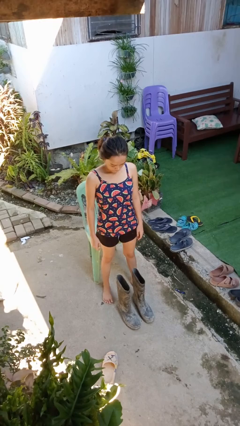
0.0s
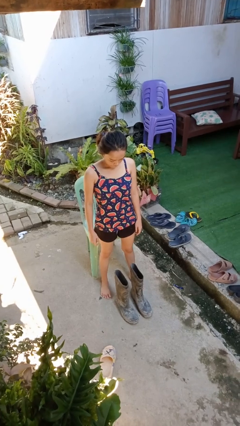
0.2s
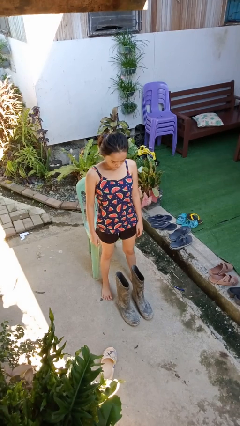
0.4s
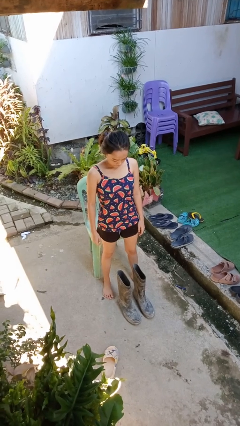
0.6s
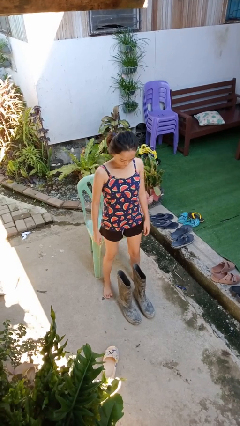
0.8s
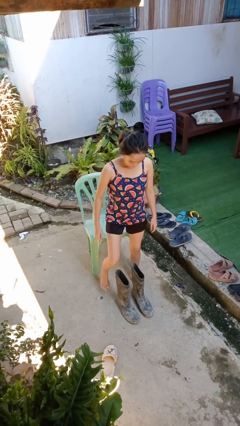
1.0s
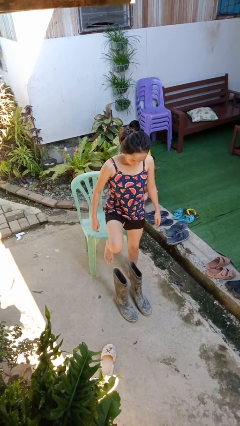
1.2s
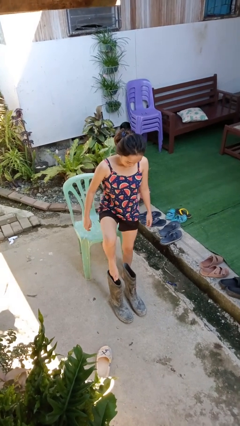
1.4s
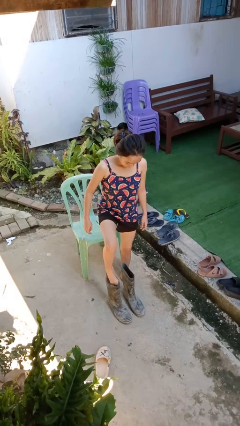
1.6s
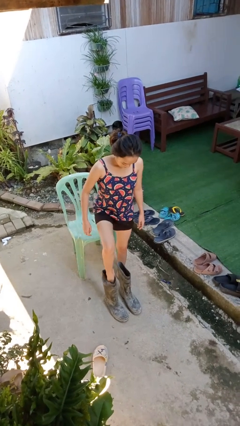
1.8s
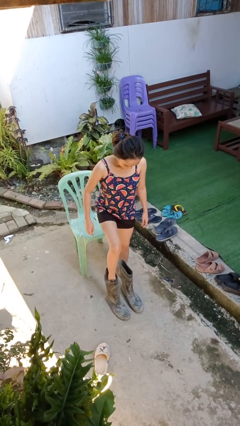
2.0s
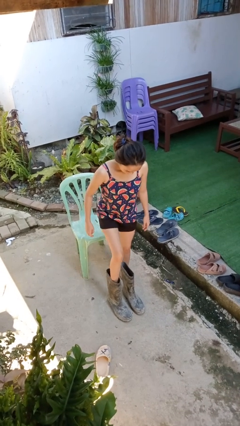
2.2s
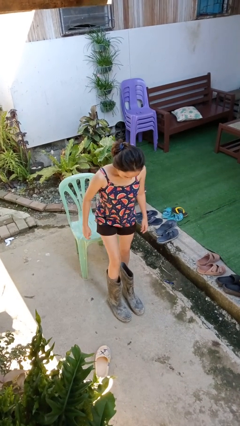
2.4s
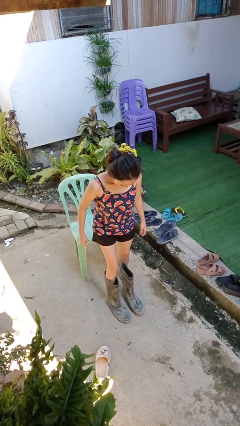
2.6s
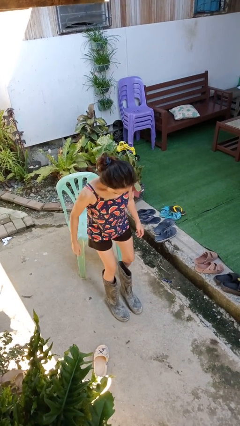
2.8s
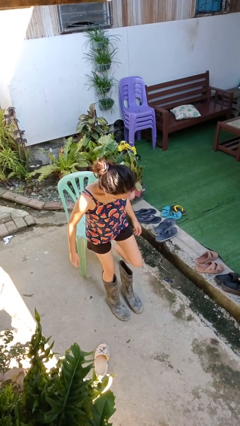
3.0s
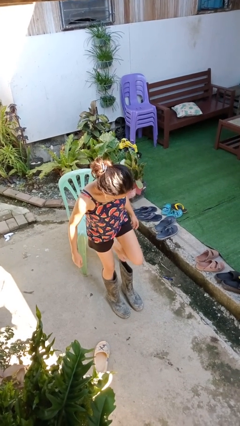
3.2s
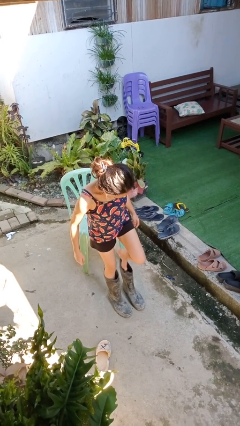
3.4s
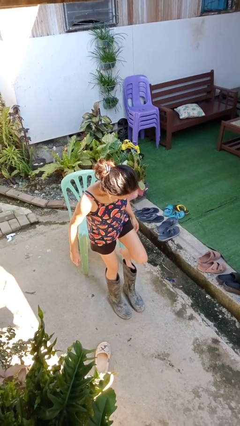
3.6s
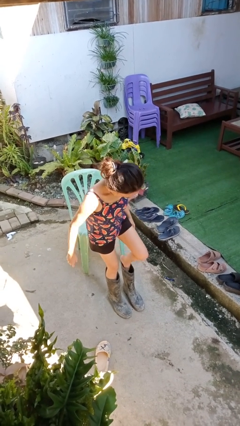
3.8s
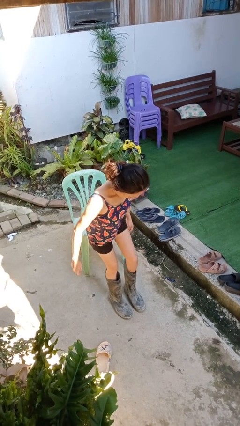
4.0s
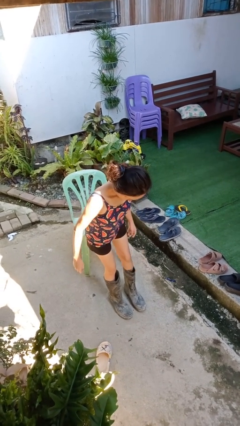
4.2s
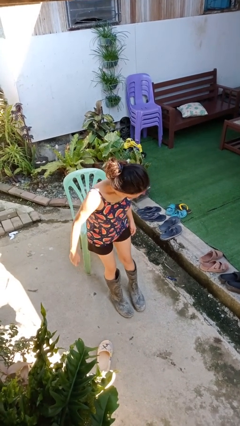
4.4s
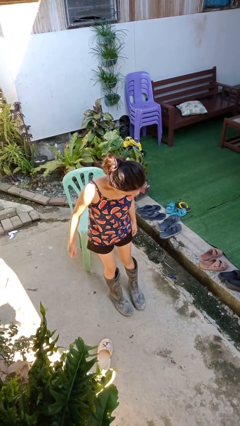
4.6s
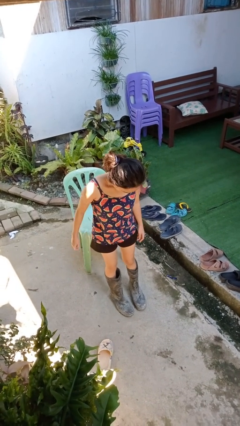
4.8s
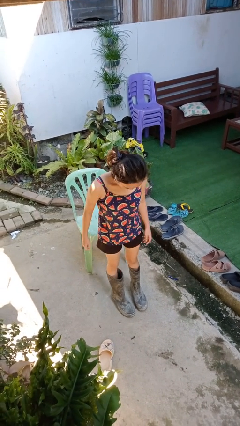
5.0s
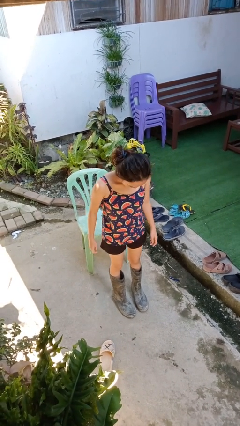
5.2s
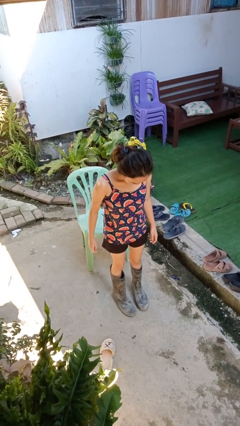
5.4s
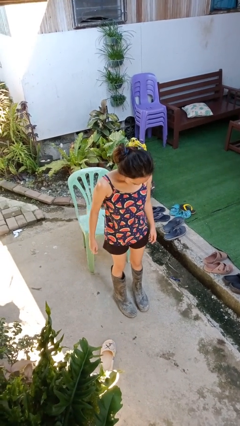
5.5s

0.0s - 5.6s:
person puts on boots

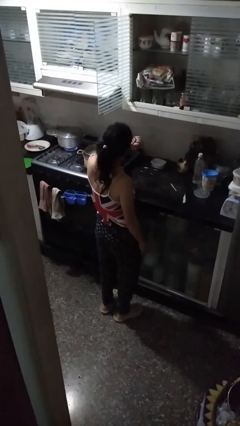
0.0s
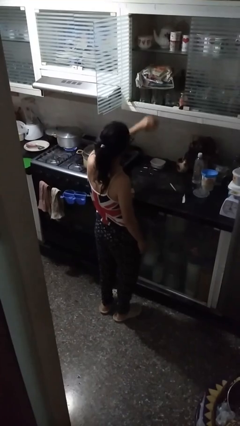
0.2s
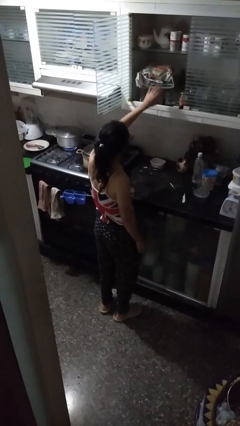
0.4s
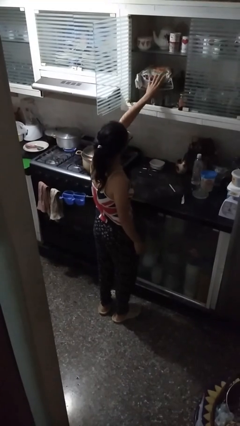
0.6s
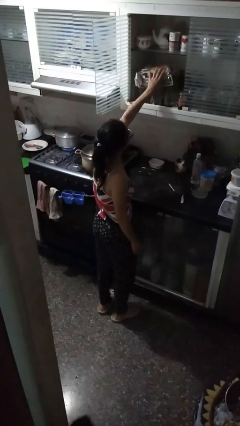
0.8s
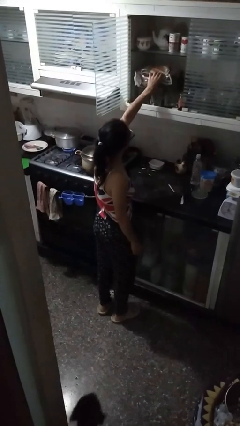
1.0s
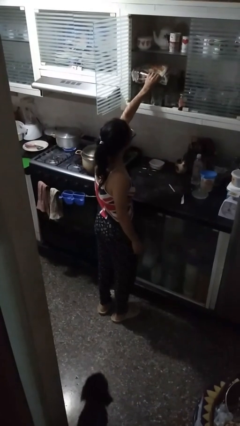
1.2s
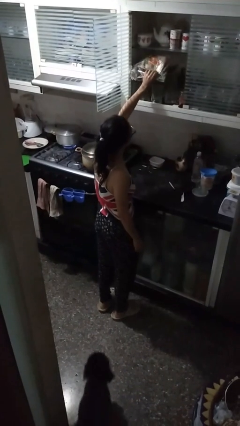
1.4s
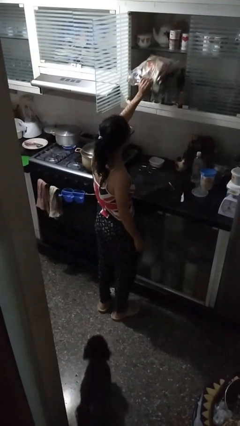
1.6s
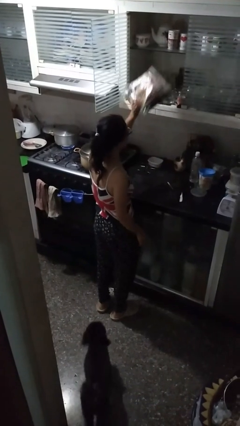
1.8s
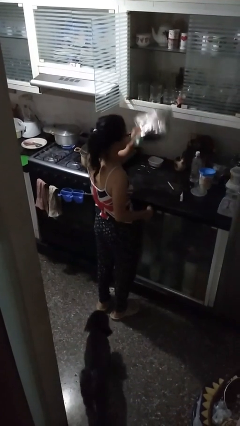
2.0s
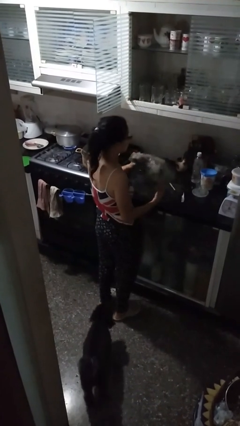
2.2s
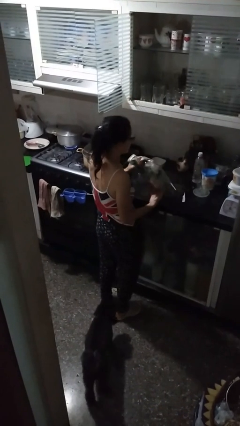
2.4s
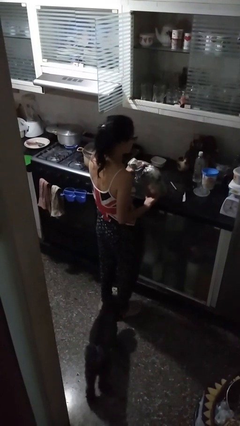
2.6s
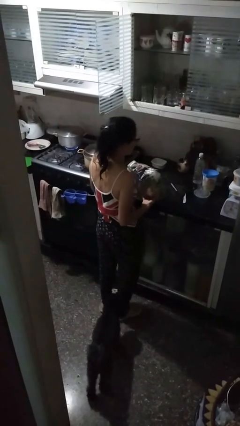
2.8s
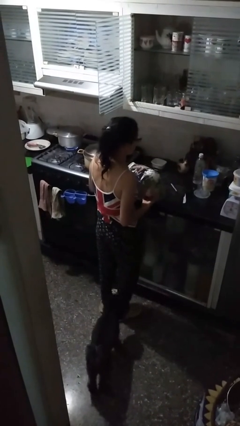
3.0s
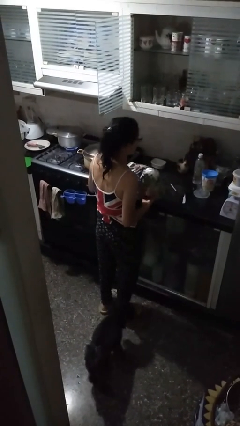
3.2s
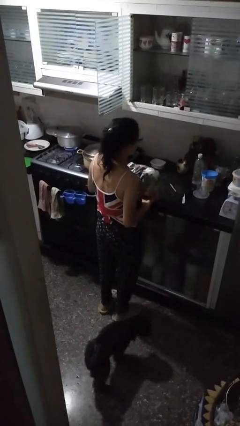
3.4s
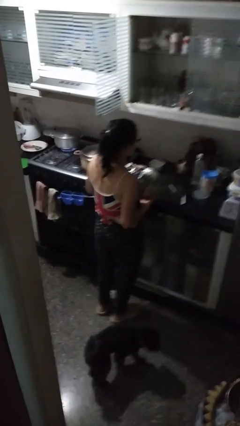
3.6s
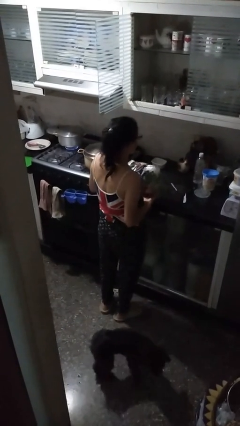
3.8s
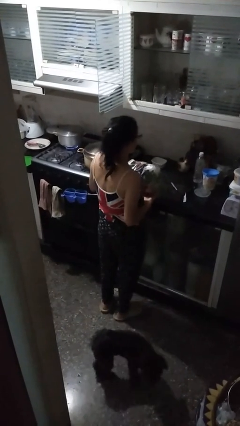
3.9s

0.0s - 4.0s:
person picks up object from cabinet

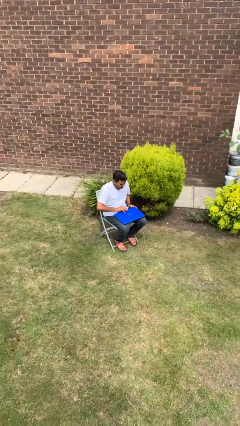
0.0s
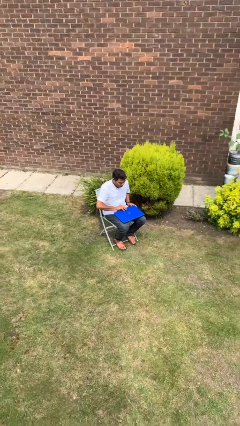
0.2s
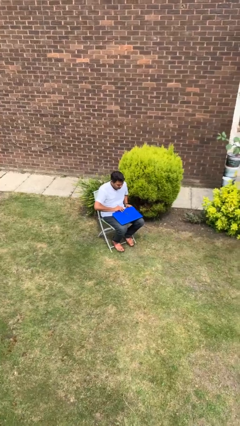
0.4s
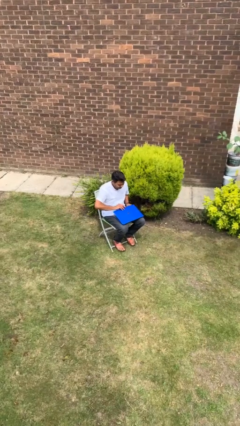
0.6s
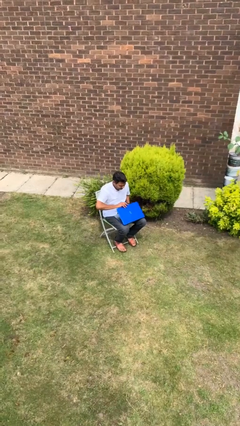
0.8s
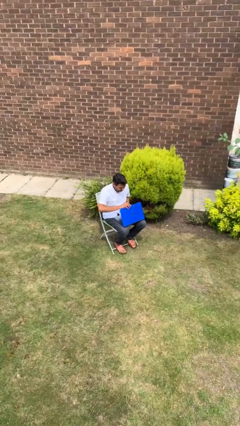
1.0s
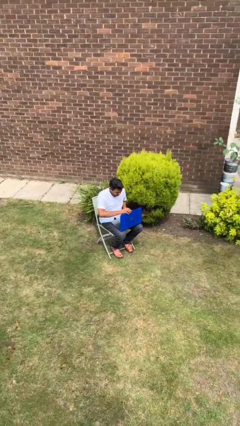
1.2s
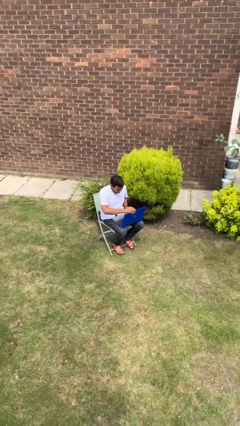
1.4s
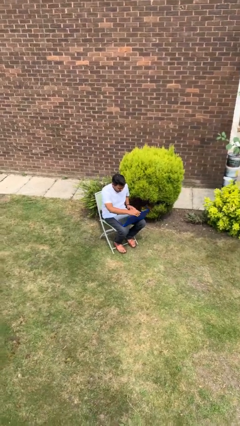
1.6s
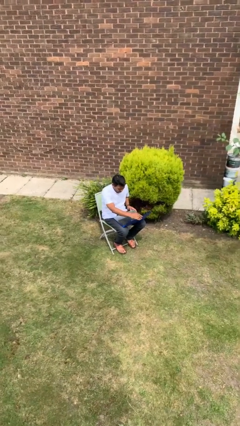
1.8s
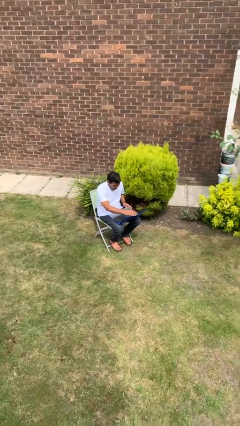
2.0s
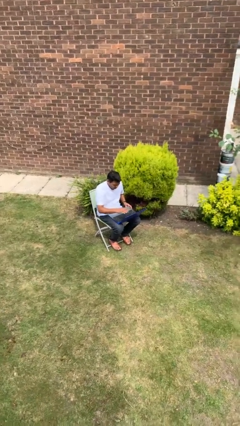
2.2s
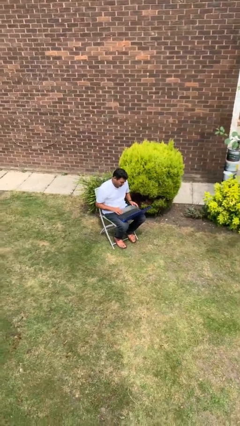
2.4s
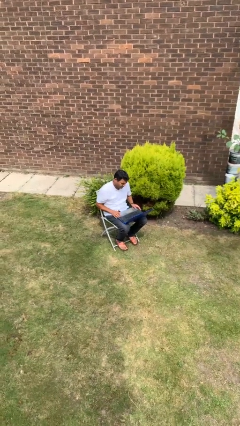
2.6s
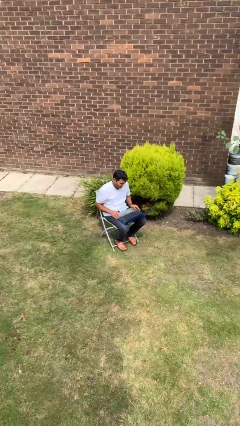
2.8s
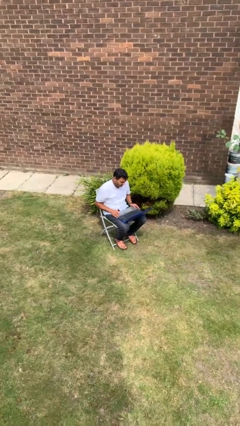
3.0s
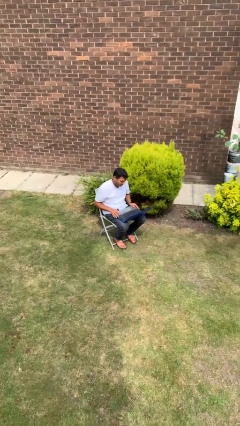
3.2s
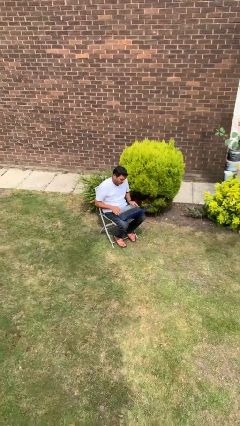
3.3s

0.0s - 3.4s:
person opens laptop

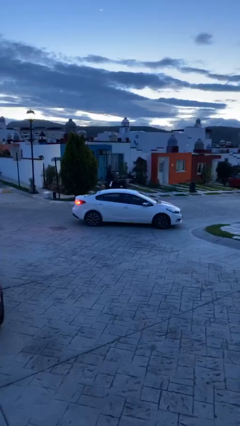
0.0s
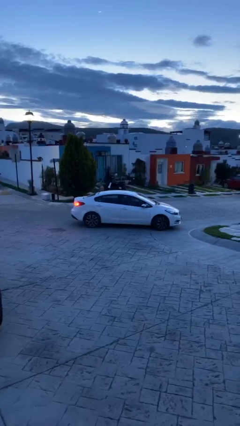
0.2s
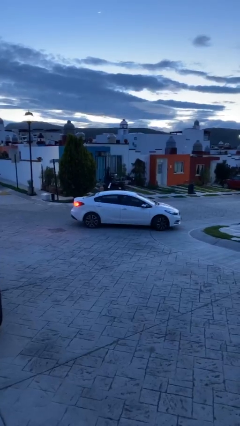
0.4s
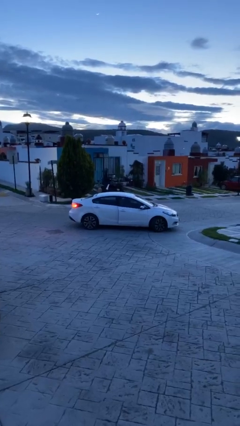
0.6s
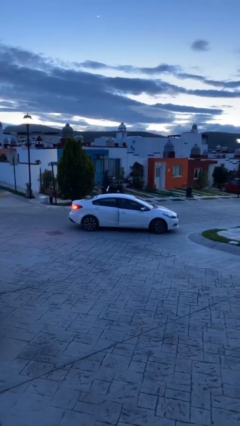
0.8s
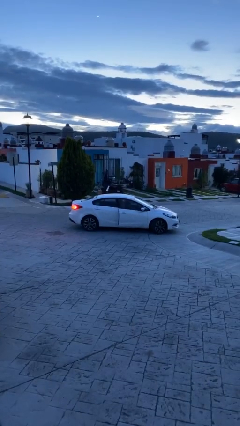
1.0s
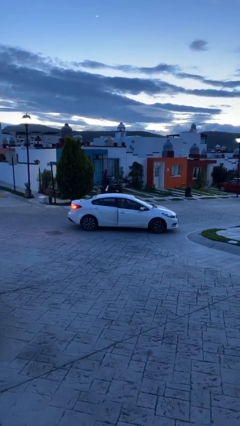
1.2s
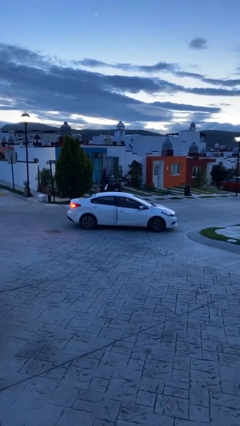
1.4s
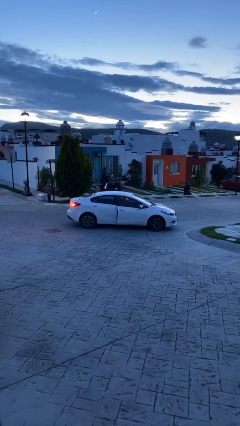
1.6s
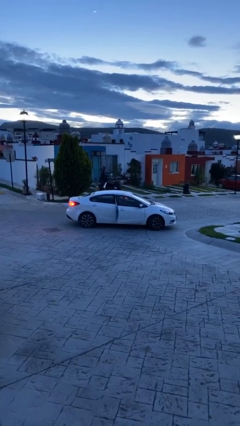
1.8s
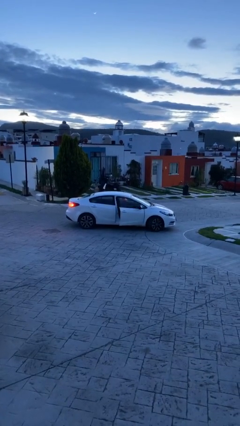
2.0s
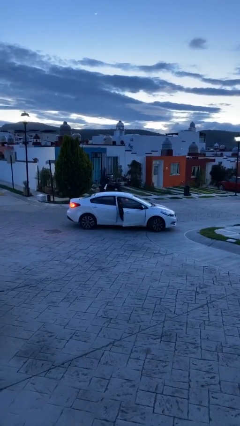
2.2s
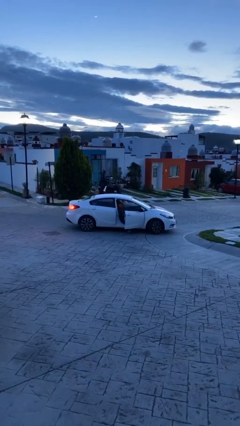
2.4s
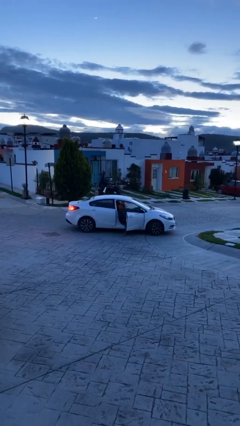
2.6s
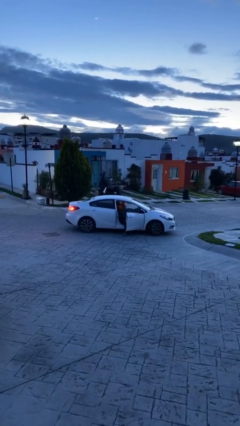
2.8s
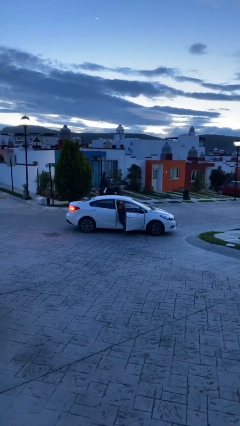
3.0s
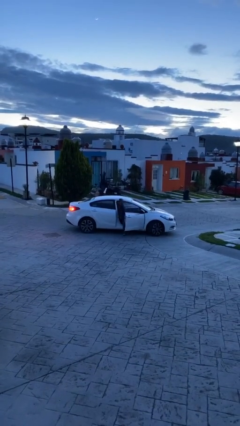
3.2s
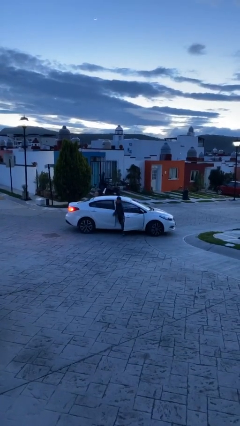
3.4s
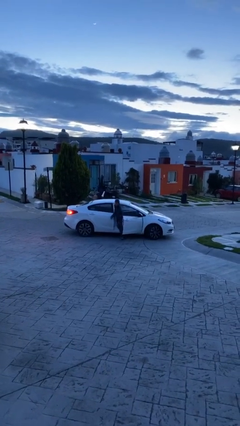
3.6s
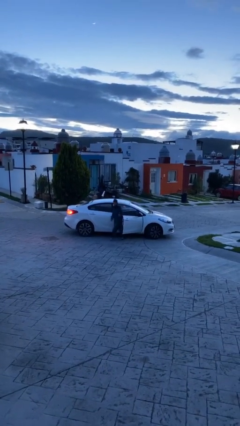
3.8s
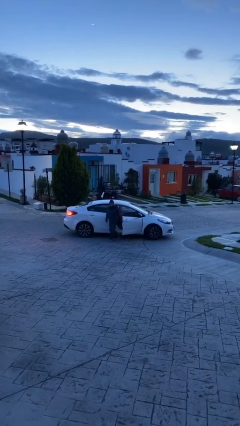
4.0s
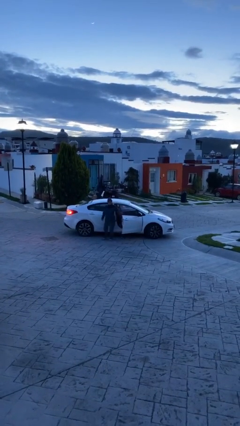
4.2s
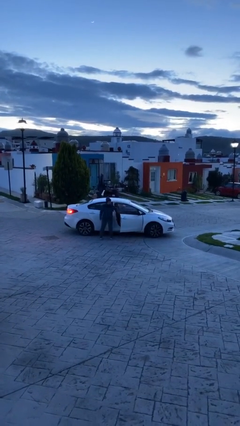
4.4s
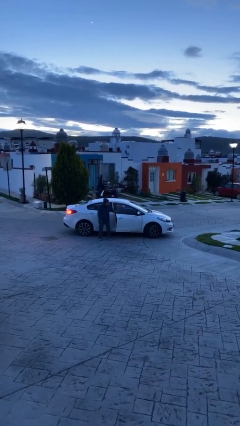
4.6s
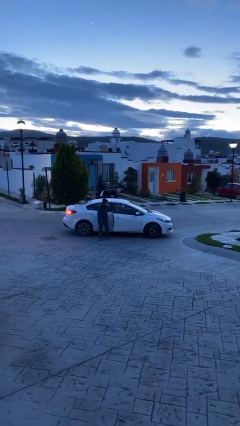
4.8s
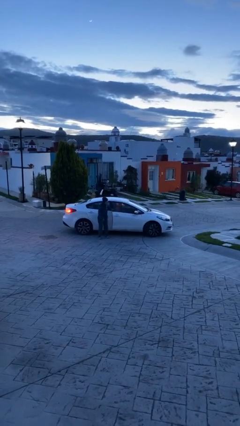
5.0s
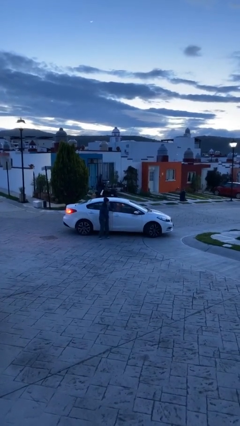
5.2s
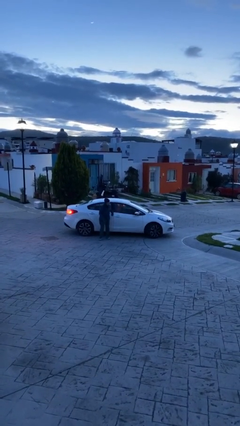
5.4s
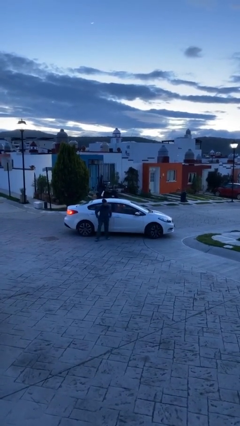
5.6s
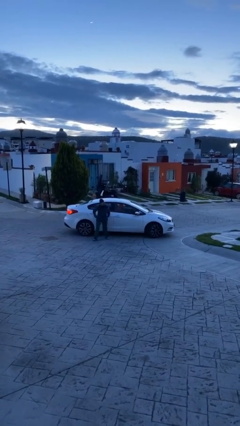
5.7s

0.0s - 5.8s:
car drops off person
